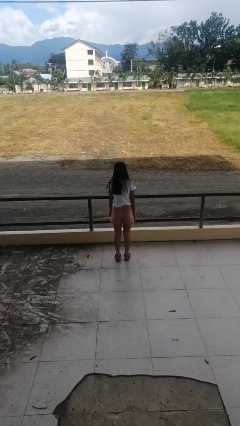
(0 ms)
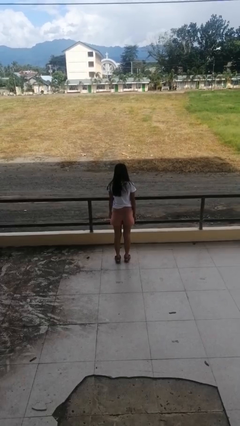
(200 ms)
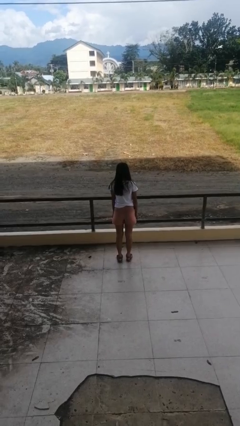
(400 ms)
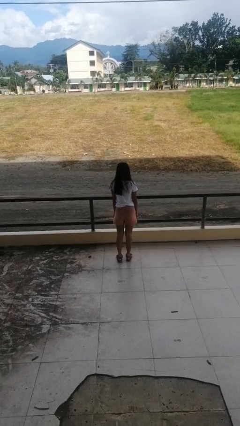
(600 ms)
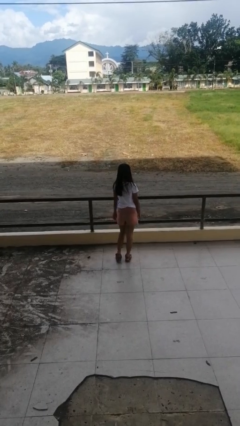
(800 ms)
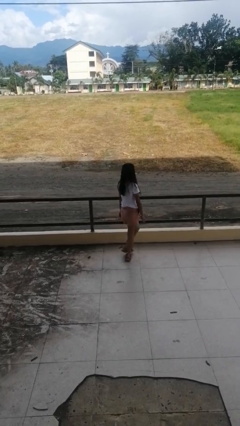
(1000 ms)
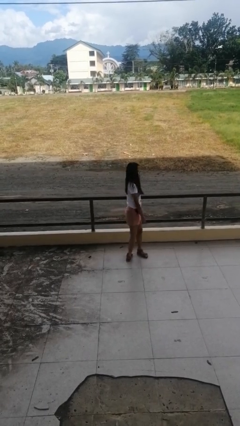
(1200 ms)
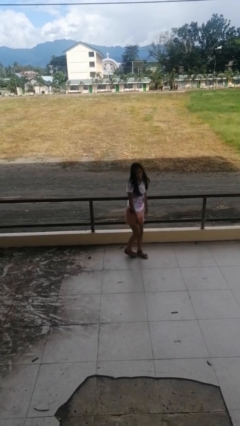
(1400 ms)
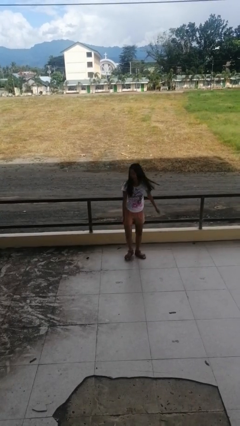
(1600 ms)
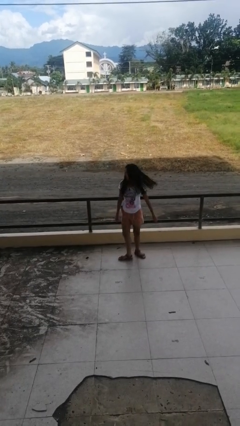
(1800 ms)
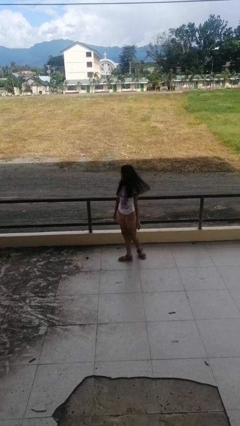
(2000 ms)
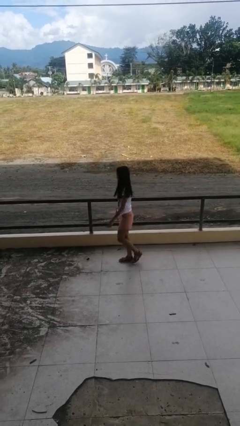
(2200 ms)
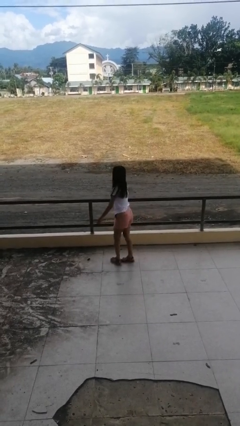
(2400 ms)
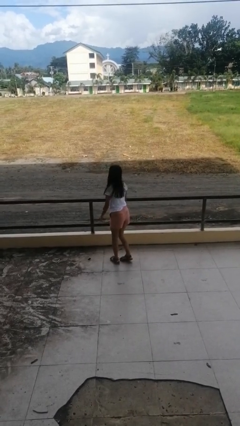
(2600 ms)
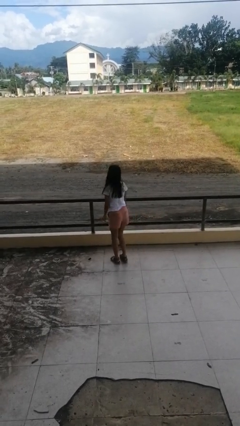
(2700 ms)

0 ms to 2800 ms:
person twirls

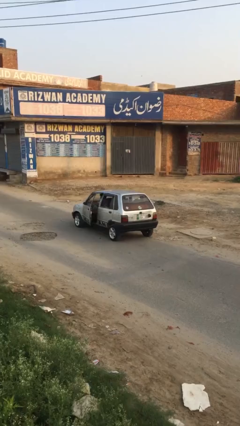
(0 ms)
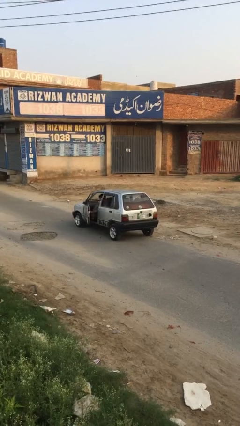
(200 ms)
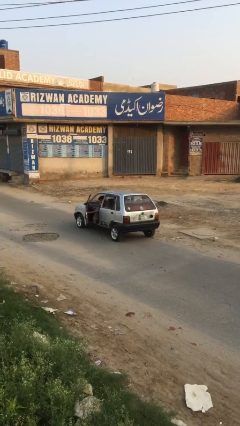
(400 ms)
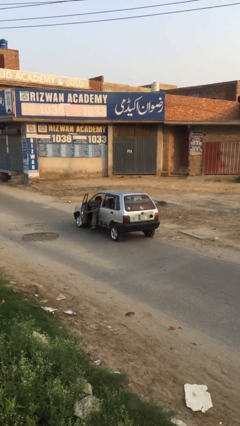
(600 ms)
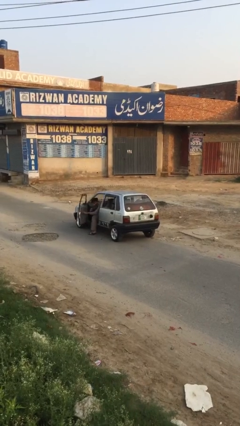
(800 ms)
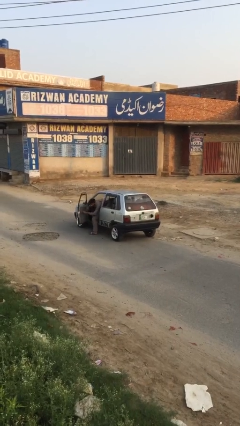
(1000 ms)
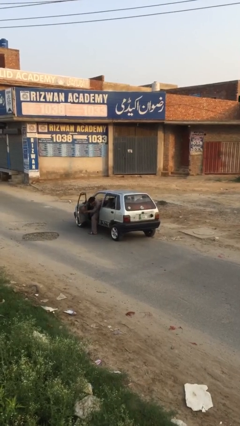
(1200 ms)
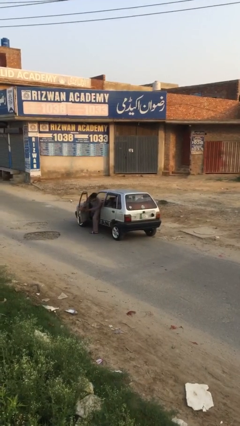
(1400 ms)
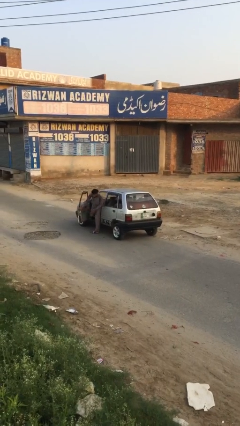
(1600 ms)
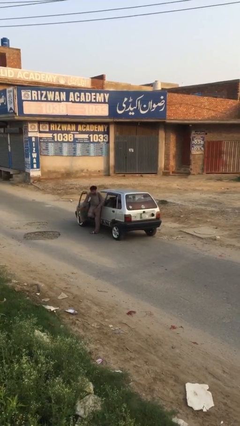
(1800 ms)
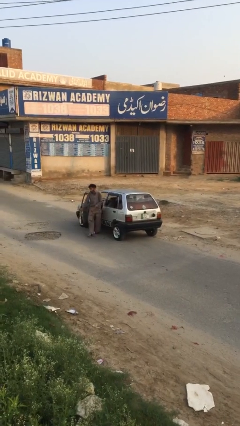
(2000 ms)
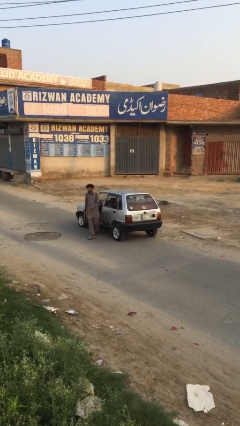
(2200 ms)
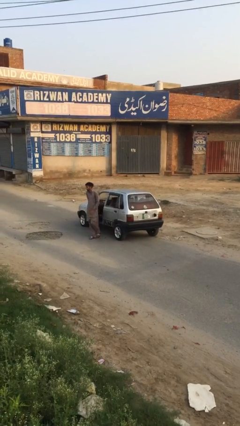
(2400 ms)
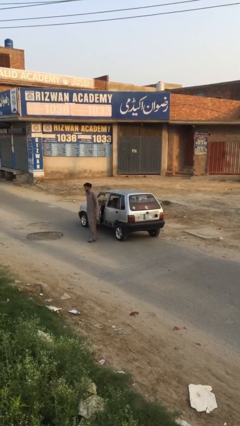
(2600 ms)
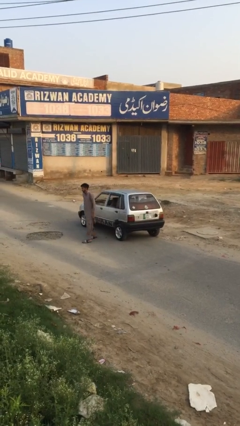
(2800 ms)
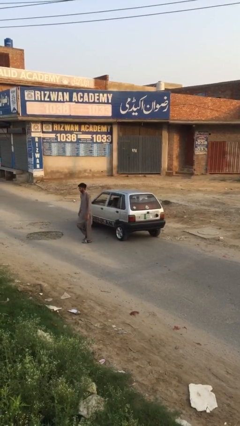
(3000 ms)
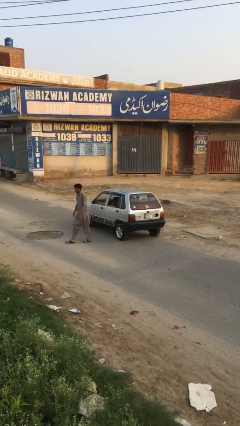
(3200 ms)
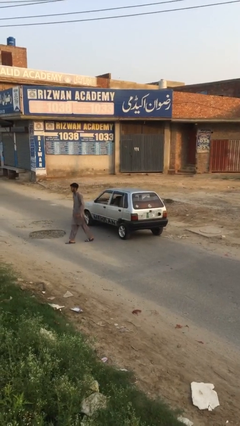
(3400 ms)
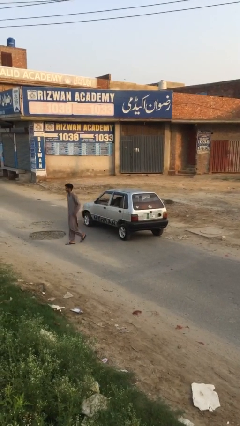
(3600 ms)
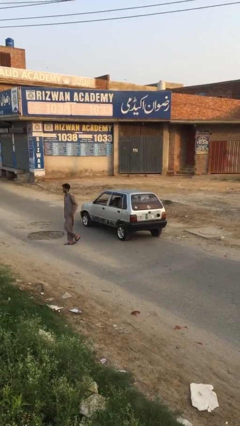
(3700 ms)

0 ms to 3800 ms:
car drops off person

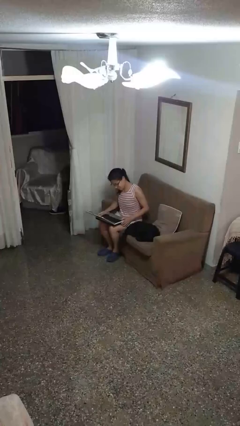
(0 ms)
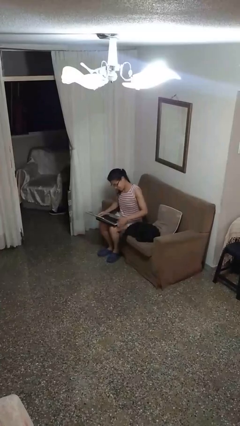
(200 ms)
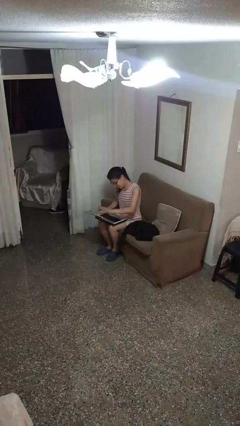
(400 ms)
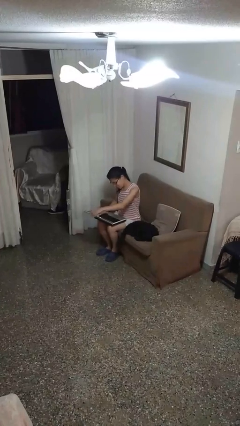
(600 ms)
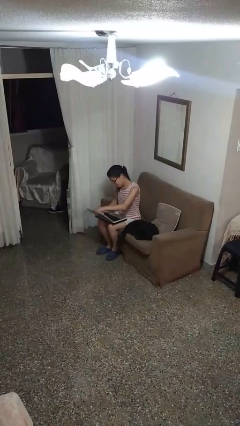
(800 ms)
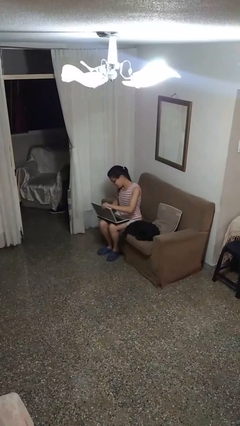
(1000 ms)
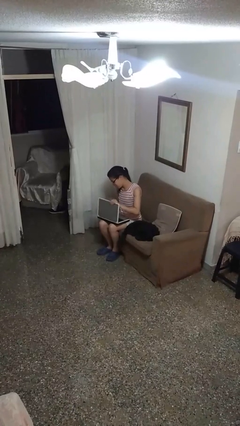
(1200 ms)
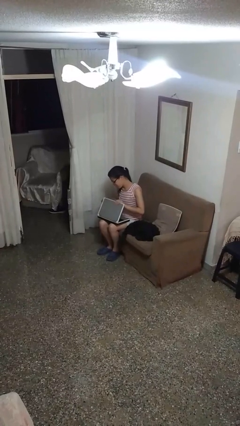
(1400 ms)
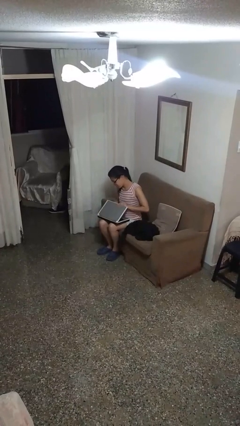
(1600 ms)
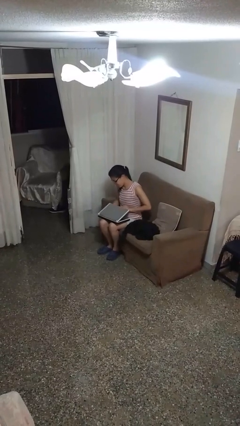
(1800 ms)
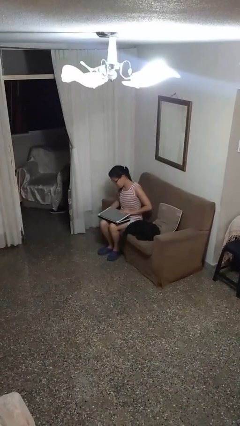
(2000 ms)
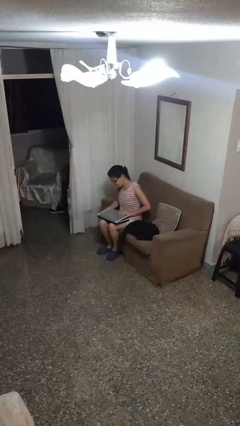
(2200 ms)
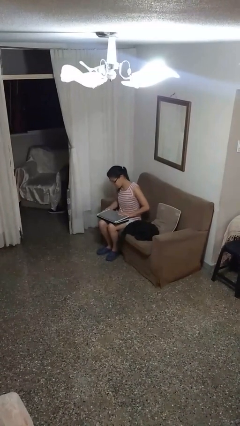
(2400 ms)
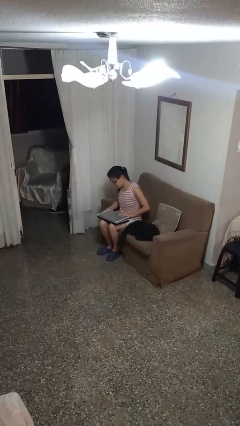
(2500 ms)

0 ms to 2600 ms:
person closes laptop

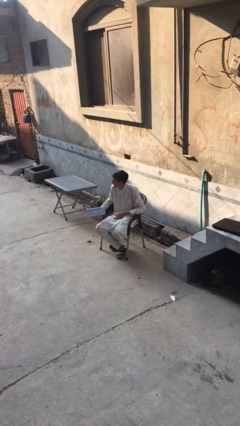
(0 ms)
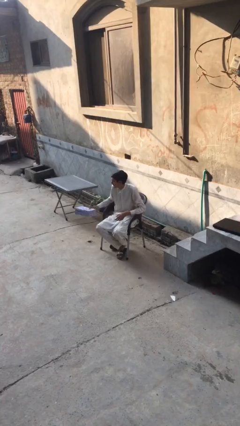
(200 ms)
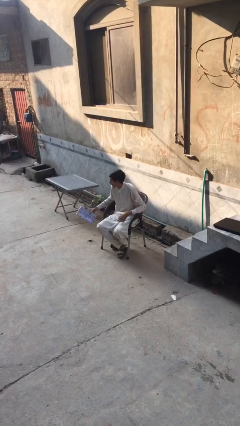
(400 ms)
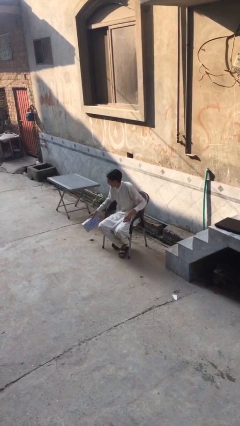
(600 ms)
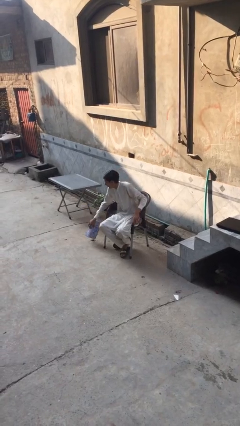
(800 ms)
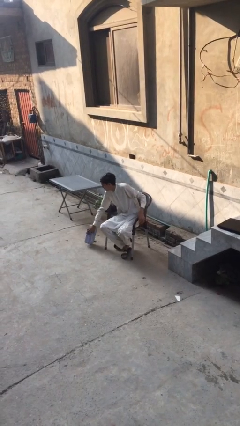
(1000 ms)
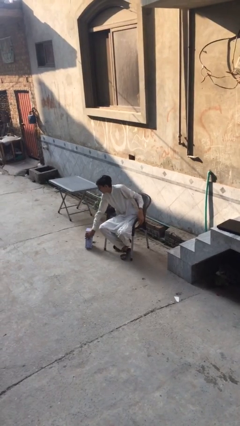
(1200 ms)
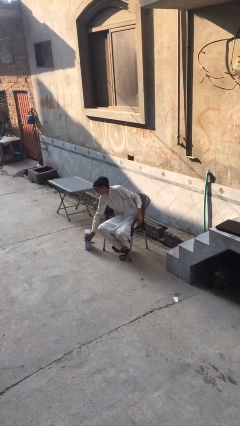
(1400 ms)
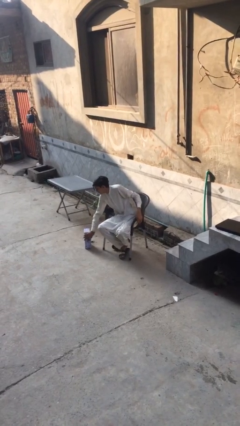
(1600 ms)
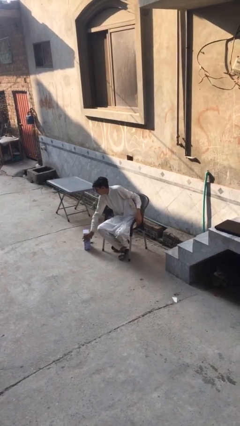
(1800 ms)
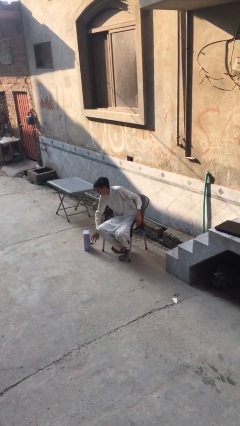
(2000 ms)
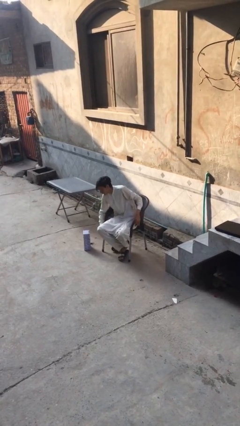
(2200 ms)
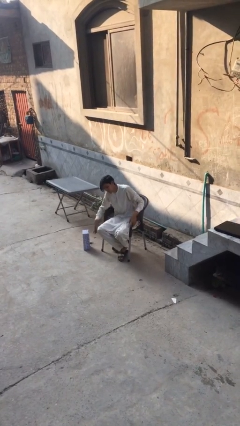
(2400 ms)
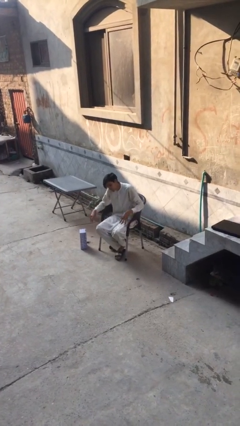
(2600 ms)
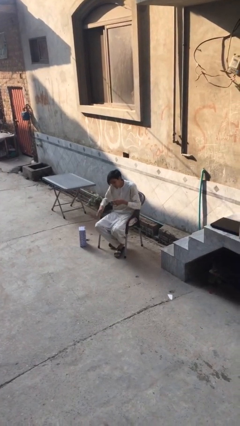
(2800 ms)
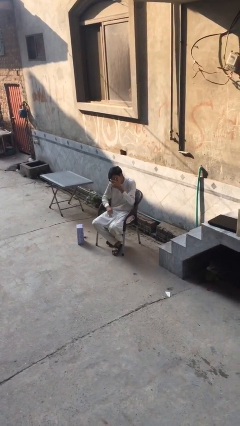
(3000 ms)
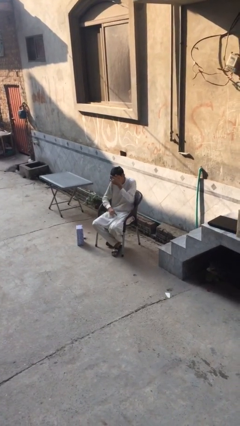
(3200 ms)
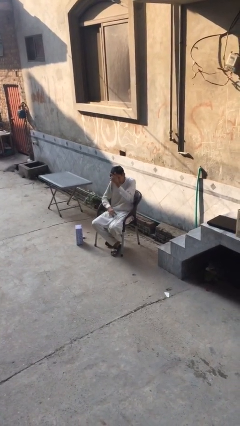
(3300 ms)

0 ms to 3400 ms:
person puts down object on floor

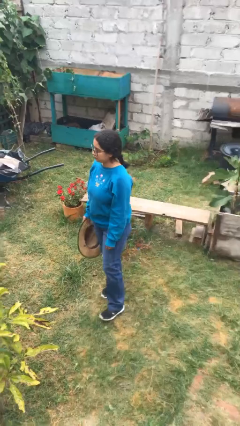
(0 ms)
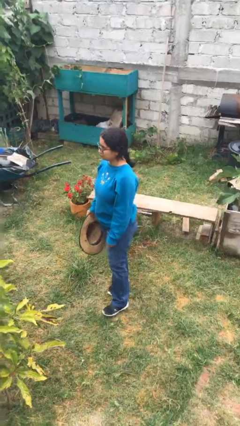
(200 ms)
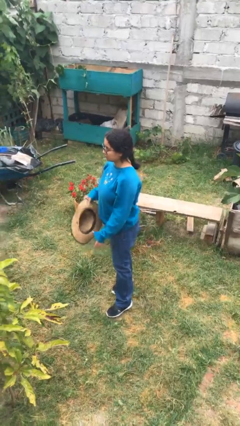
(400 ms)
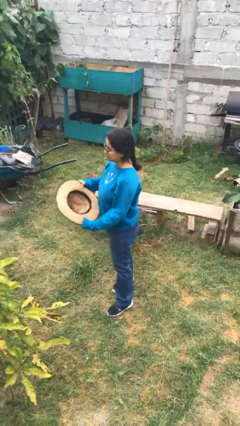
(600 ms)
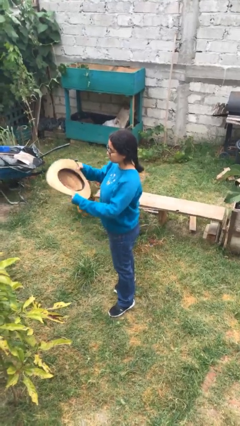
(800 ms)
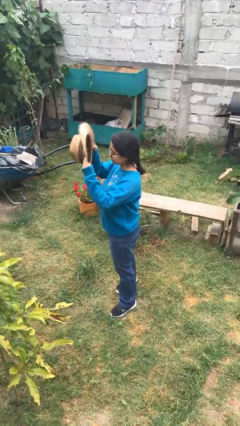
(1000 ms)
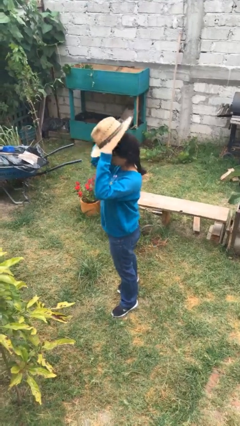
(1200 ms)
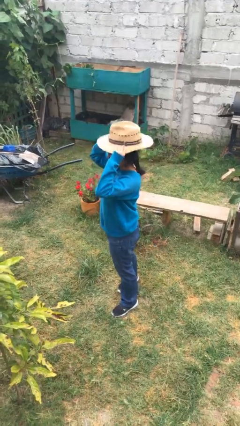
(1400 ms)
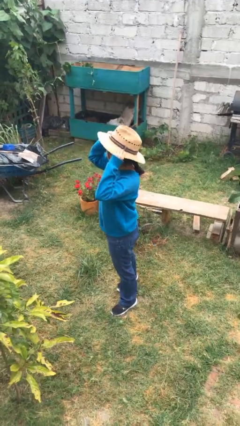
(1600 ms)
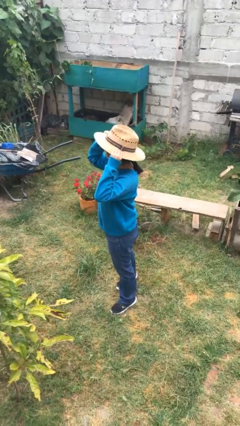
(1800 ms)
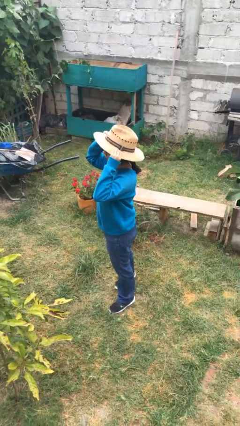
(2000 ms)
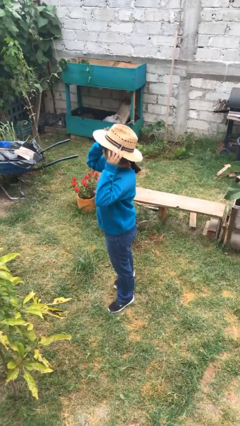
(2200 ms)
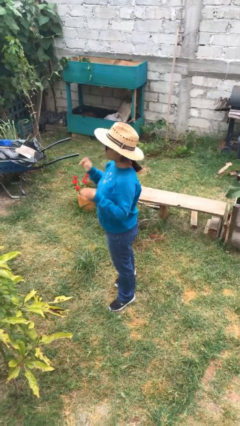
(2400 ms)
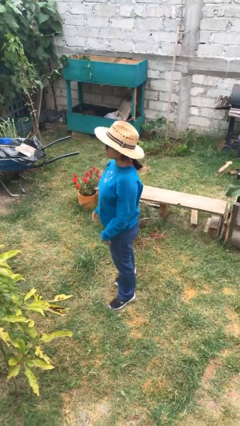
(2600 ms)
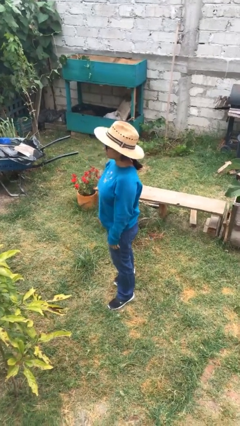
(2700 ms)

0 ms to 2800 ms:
person puts on hat

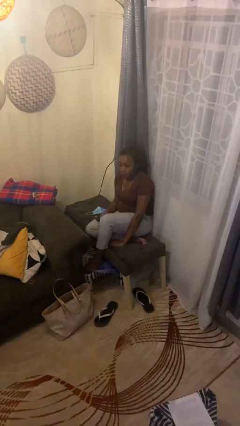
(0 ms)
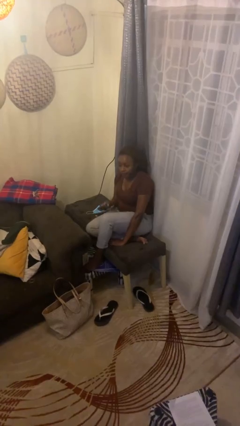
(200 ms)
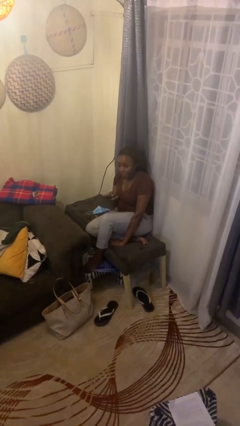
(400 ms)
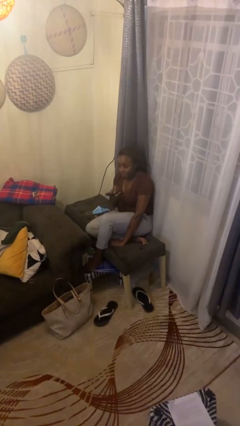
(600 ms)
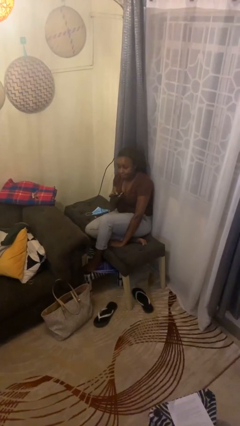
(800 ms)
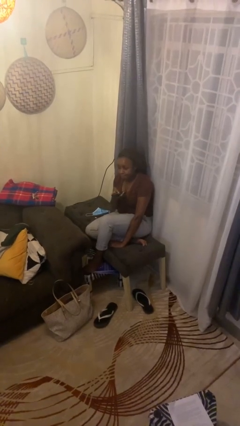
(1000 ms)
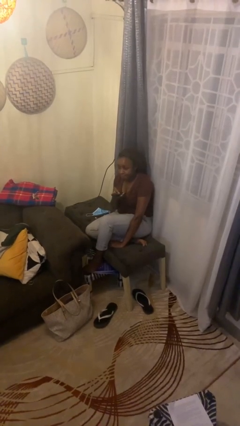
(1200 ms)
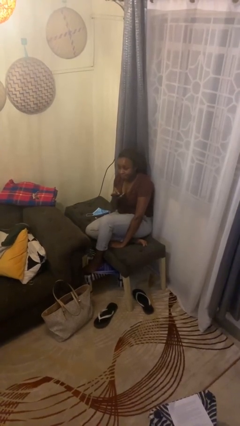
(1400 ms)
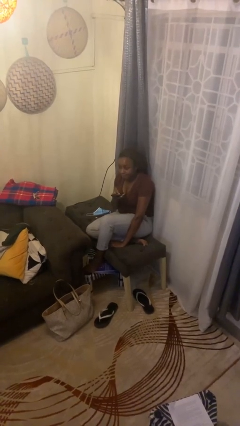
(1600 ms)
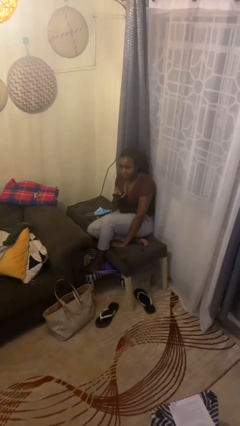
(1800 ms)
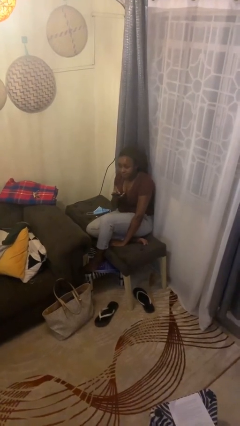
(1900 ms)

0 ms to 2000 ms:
person uses television remote
